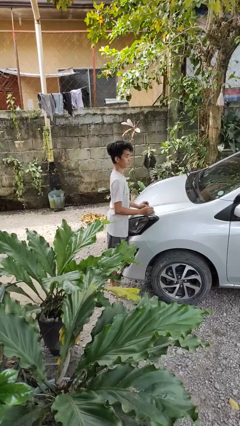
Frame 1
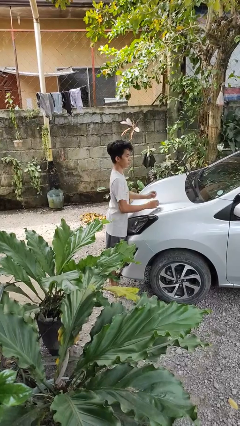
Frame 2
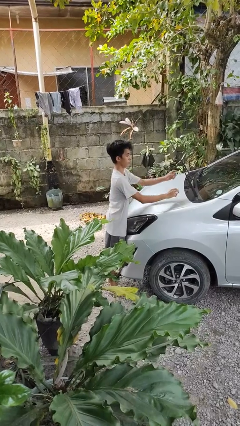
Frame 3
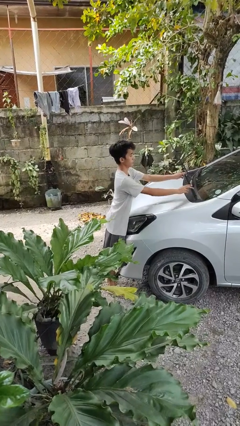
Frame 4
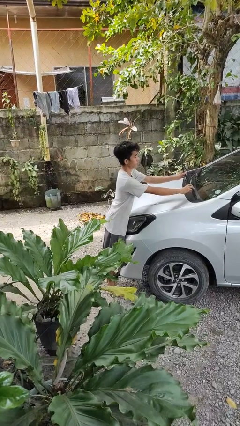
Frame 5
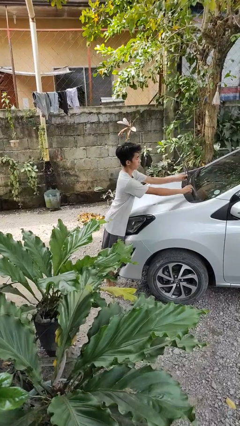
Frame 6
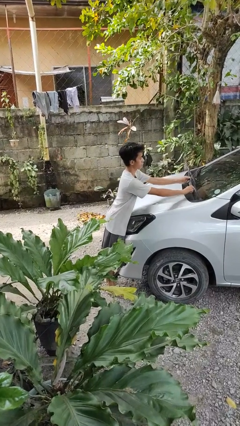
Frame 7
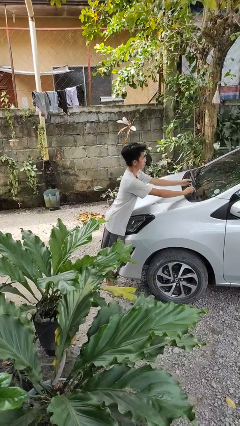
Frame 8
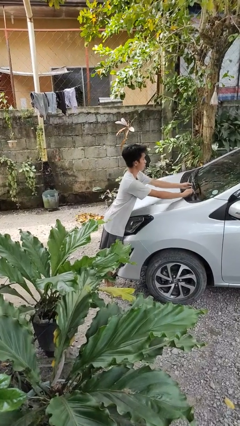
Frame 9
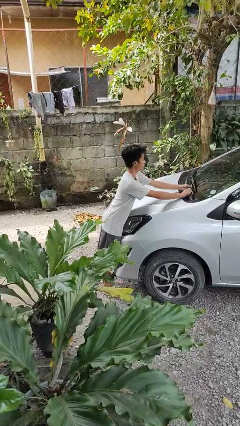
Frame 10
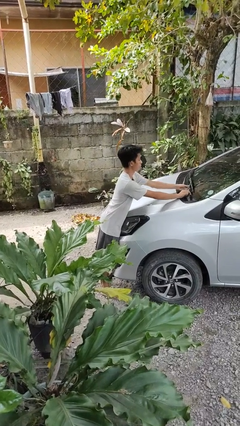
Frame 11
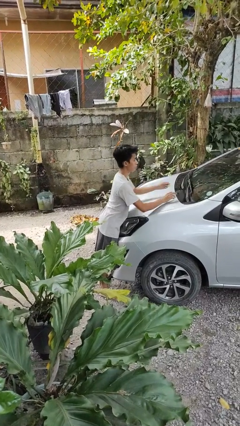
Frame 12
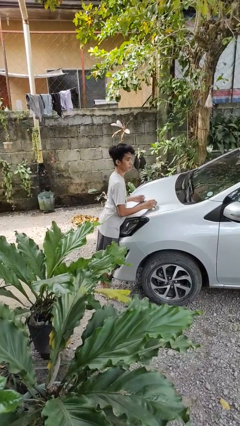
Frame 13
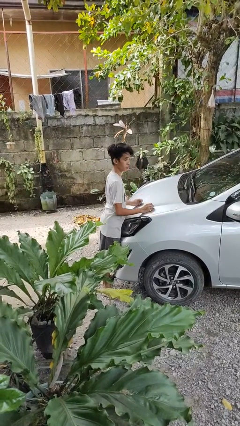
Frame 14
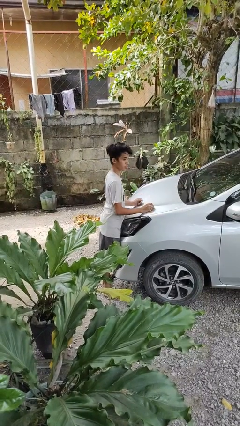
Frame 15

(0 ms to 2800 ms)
person flips down car wipers

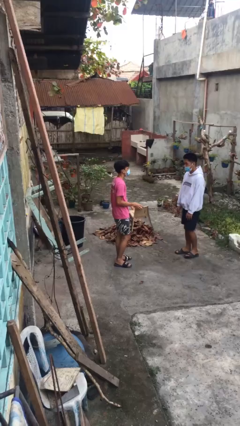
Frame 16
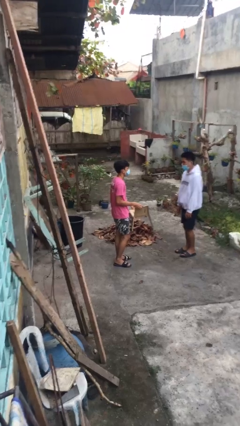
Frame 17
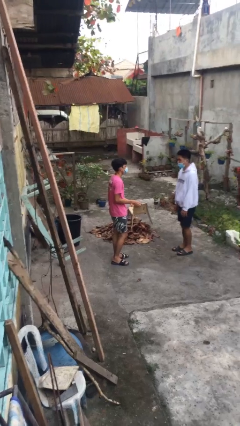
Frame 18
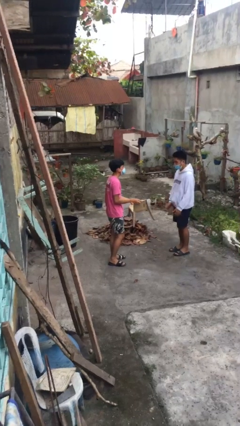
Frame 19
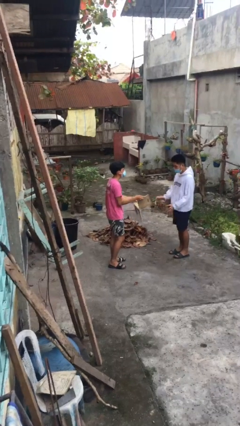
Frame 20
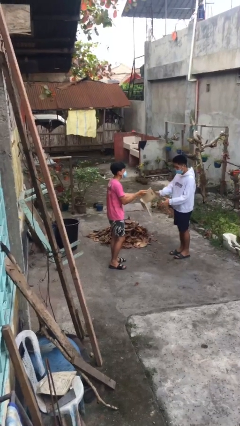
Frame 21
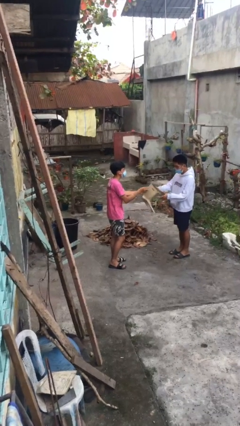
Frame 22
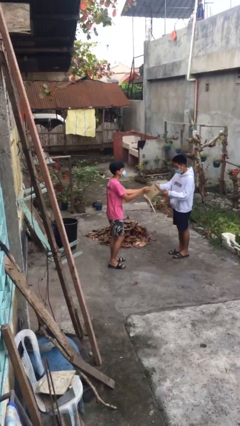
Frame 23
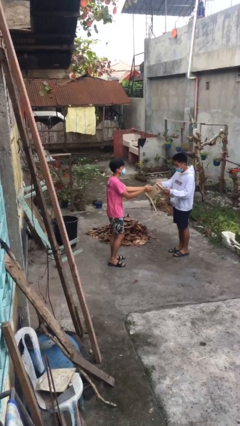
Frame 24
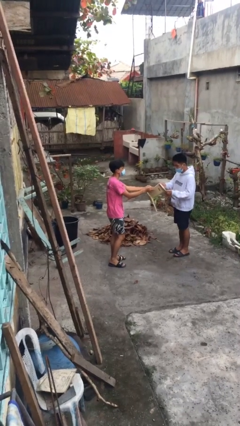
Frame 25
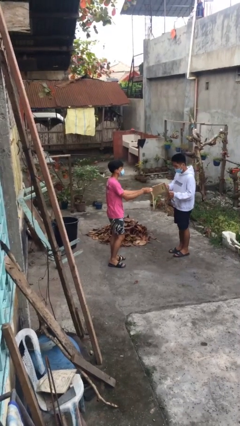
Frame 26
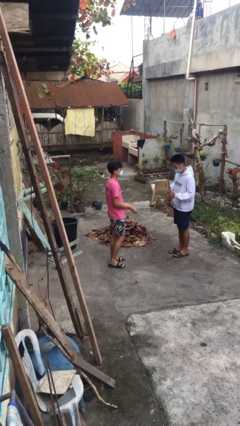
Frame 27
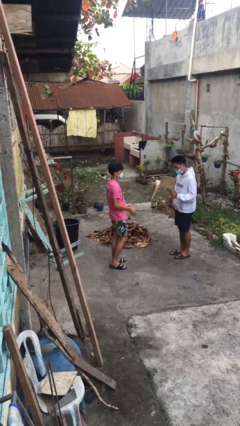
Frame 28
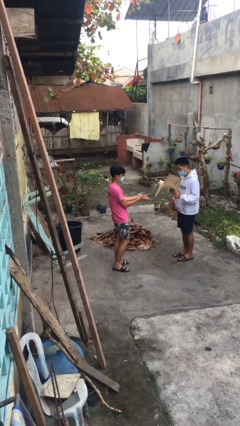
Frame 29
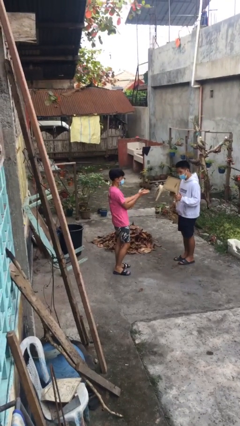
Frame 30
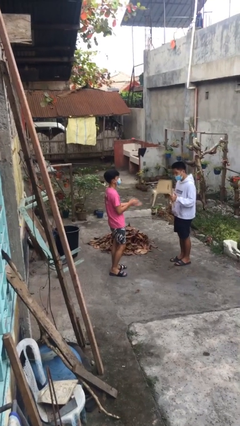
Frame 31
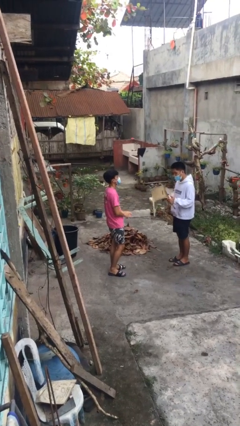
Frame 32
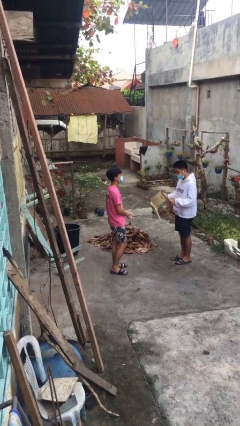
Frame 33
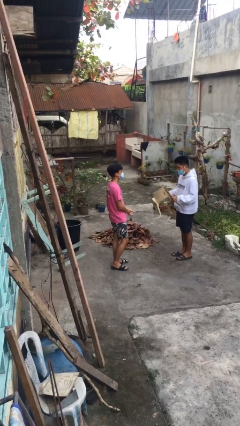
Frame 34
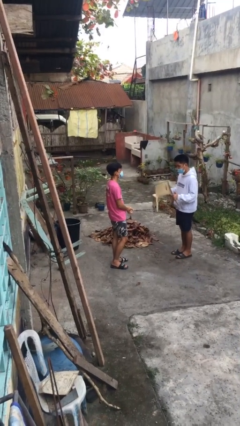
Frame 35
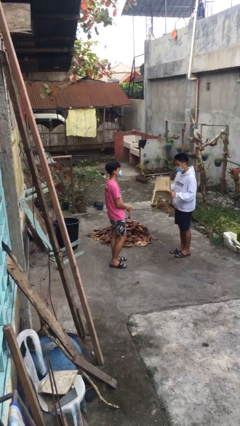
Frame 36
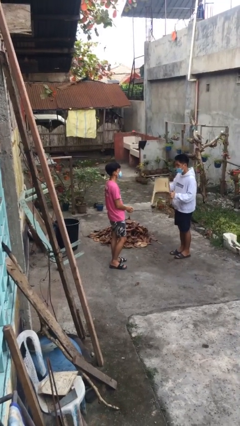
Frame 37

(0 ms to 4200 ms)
person transfers object to person

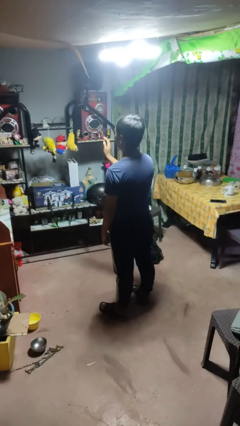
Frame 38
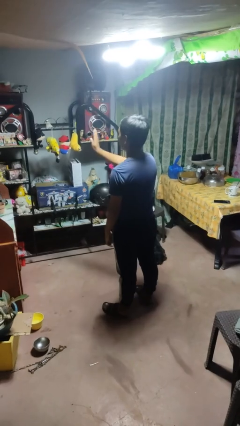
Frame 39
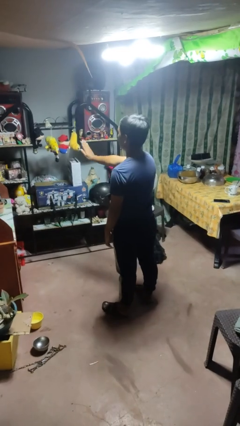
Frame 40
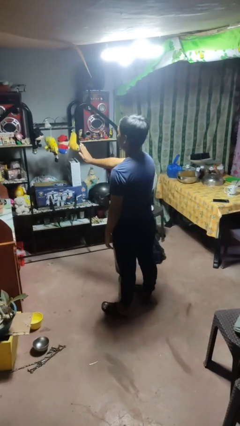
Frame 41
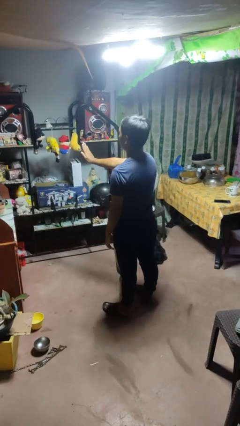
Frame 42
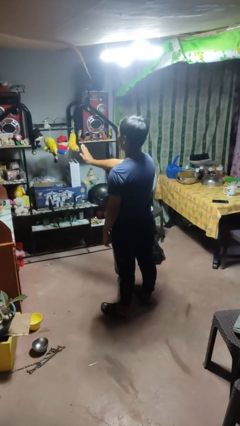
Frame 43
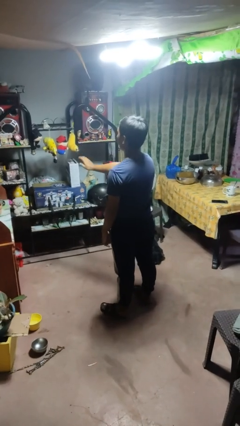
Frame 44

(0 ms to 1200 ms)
person gestures stop

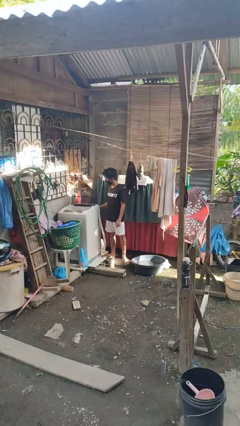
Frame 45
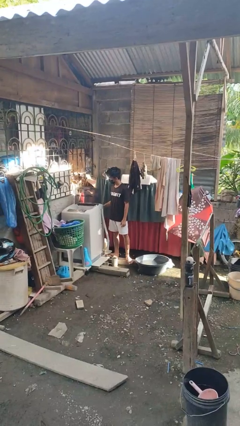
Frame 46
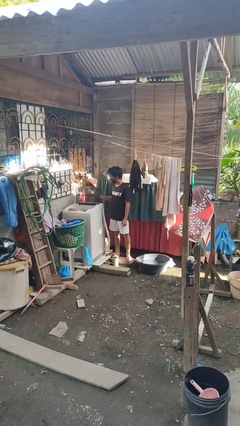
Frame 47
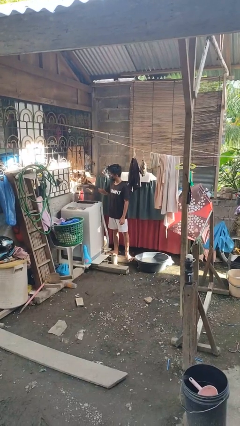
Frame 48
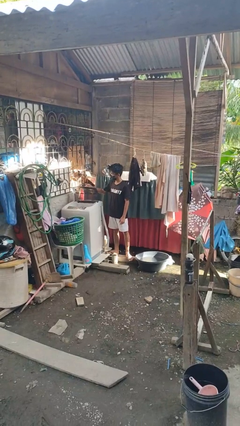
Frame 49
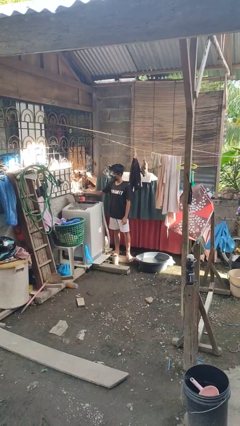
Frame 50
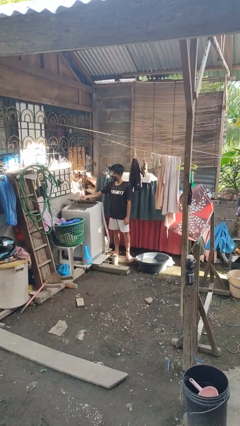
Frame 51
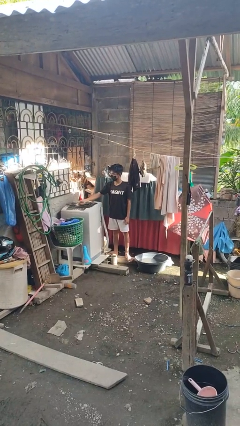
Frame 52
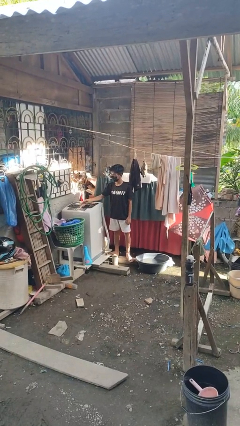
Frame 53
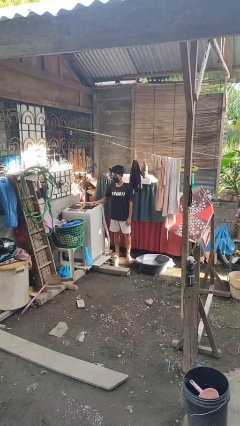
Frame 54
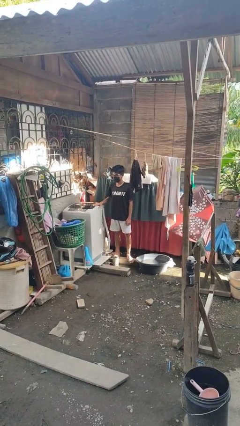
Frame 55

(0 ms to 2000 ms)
person closes clothes washer

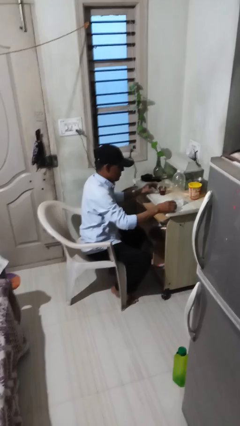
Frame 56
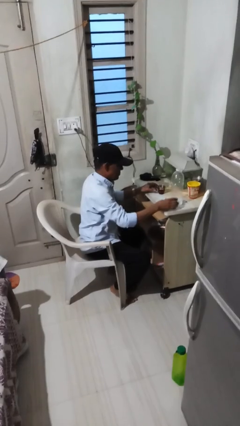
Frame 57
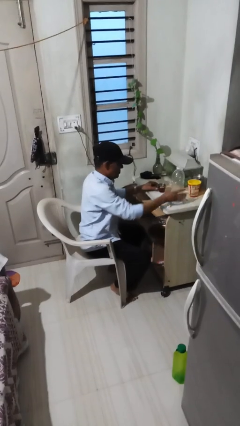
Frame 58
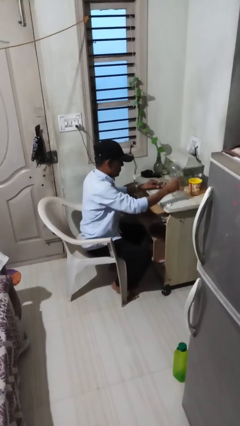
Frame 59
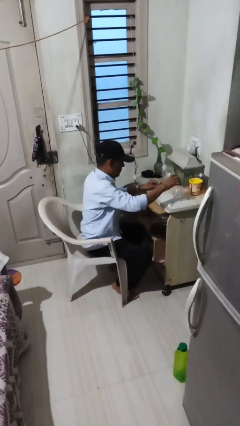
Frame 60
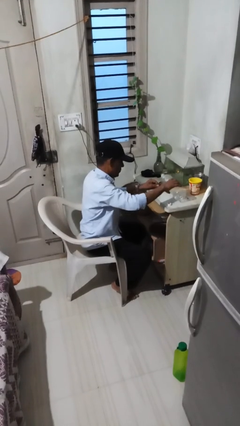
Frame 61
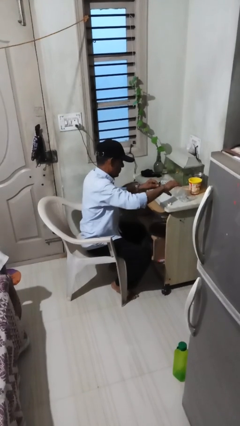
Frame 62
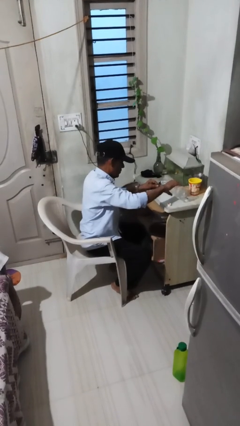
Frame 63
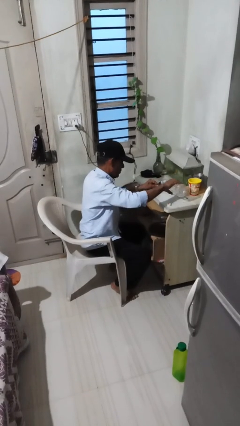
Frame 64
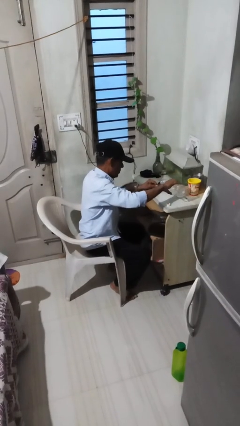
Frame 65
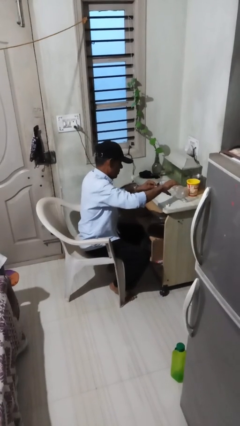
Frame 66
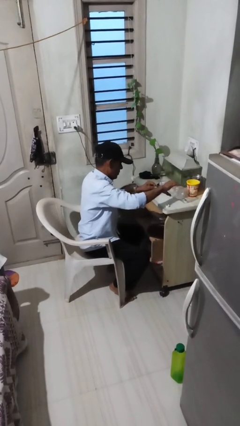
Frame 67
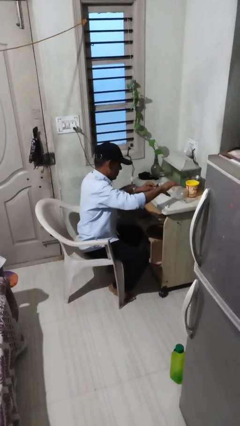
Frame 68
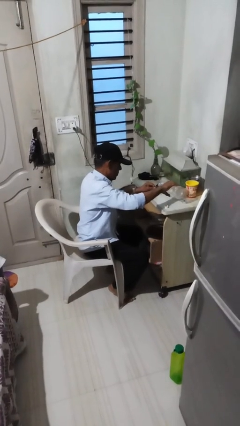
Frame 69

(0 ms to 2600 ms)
person pours liquid into cup

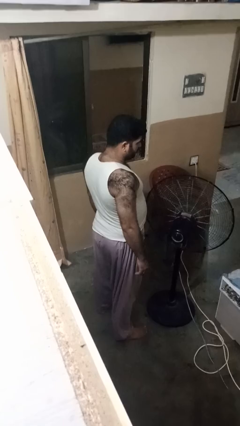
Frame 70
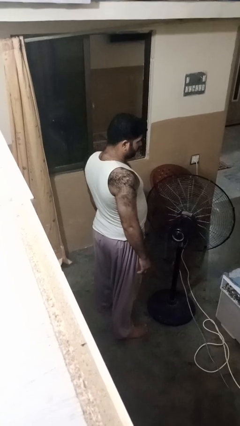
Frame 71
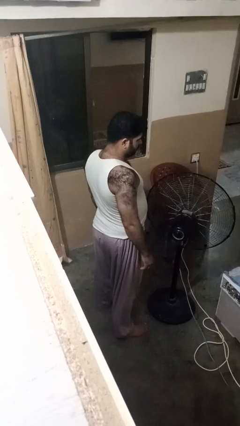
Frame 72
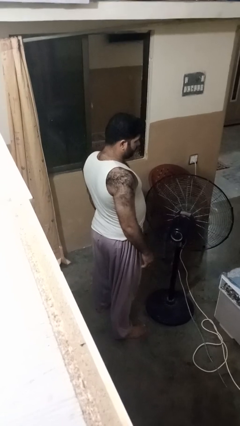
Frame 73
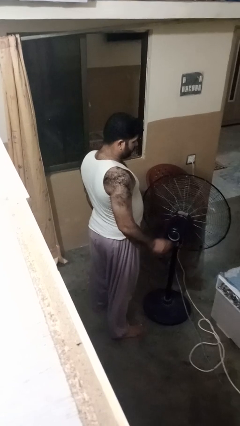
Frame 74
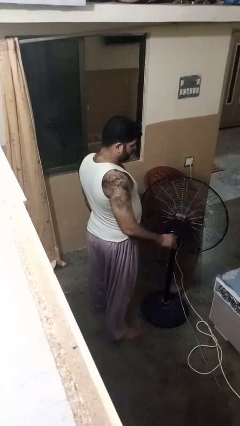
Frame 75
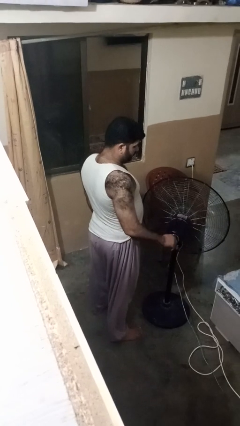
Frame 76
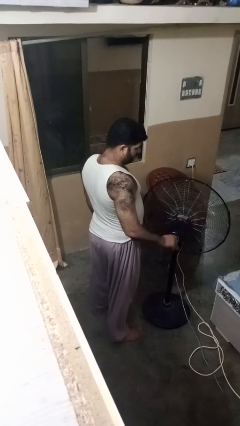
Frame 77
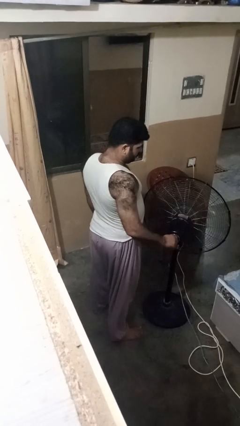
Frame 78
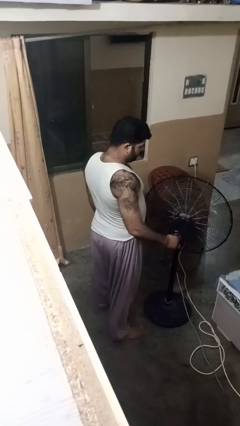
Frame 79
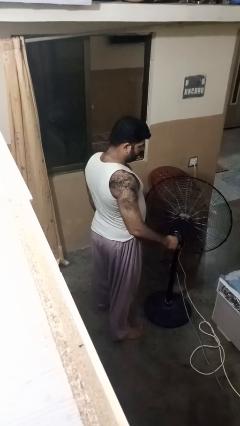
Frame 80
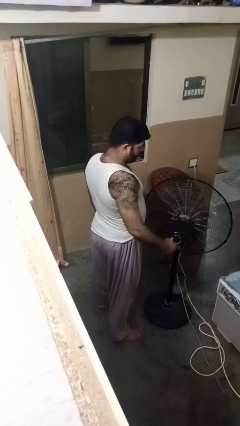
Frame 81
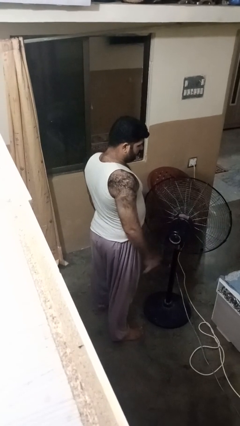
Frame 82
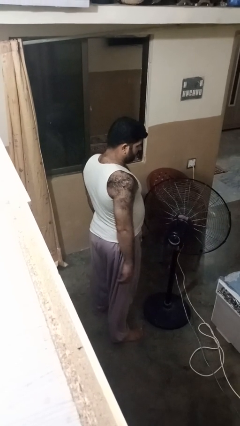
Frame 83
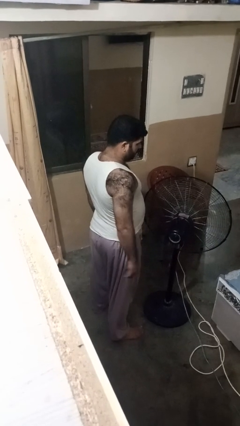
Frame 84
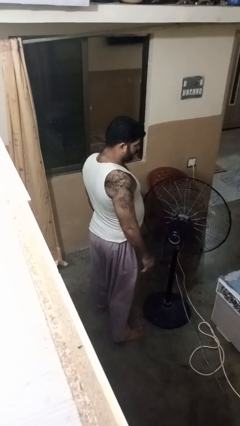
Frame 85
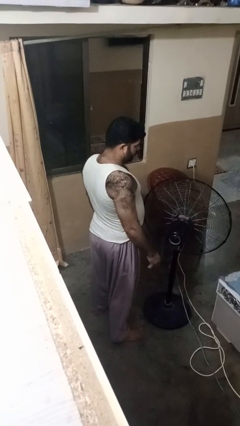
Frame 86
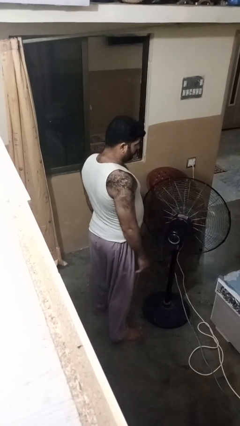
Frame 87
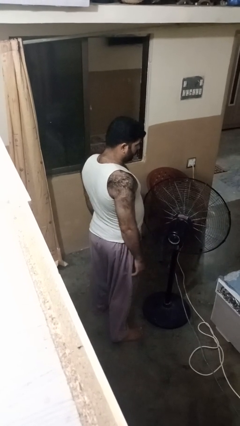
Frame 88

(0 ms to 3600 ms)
person turns on fan

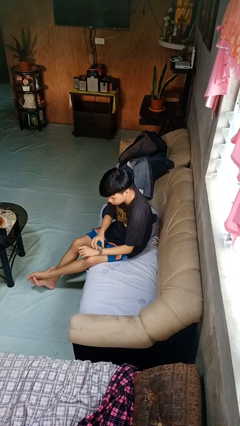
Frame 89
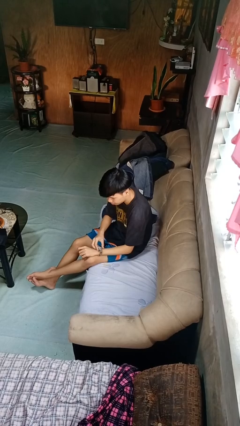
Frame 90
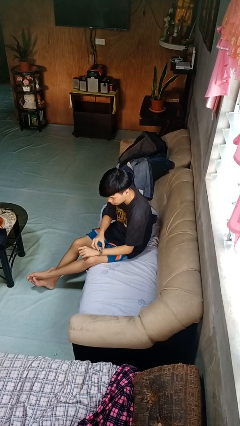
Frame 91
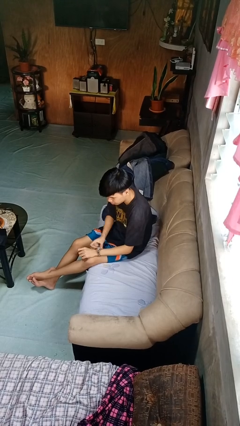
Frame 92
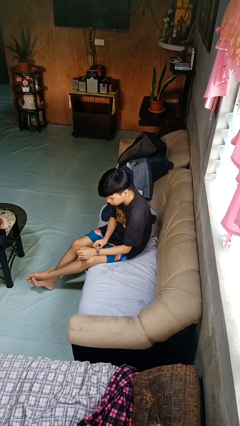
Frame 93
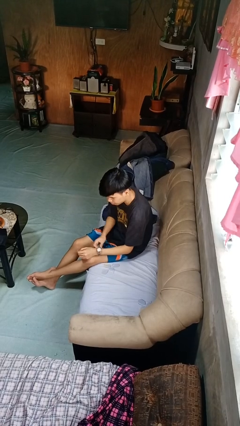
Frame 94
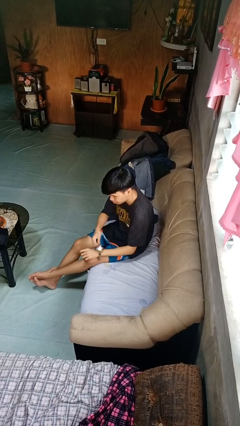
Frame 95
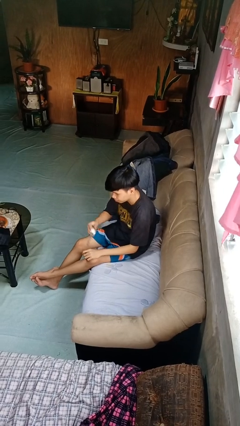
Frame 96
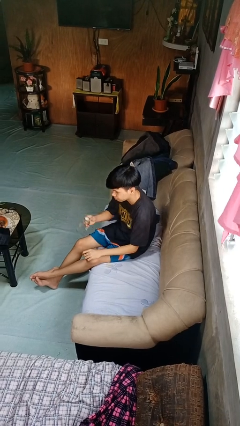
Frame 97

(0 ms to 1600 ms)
person takes off wristwatch
